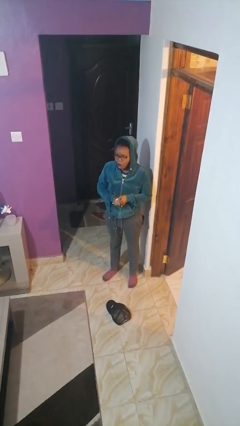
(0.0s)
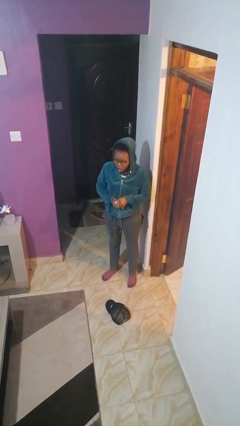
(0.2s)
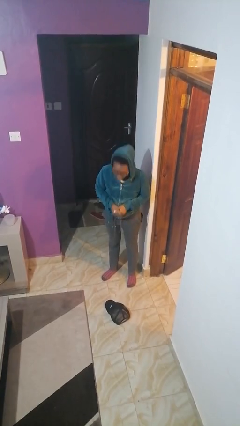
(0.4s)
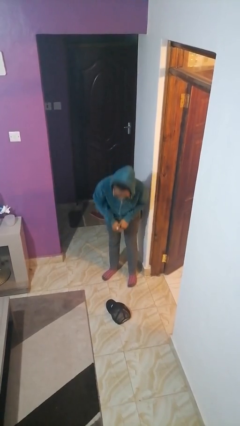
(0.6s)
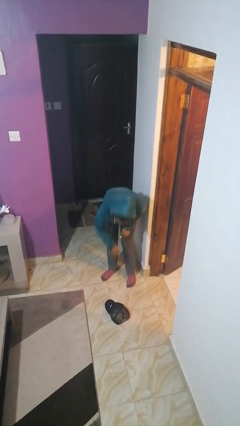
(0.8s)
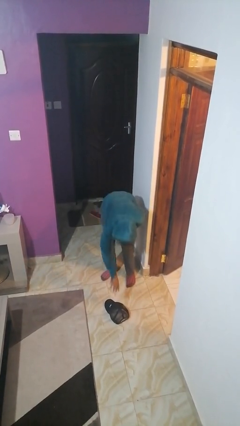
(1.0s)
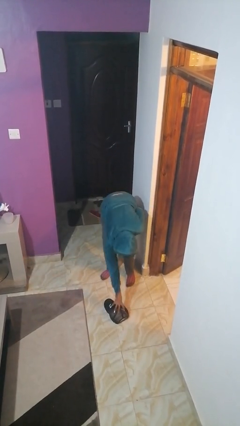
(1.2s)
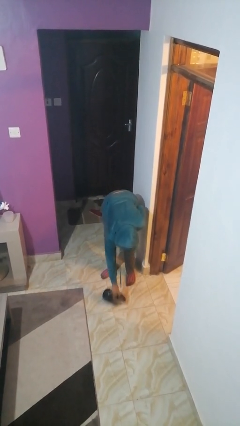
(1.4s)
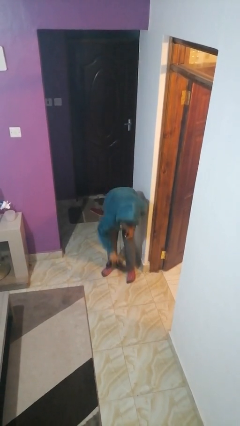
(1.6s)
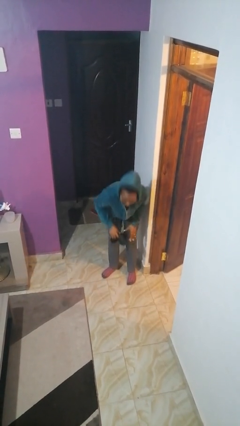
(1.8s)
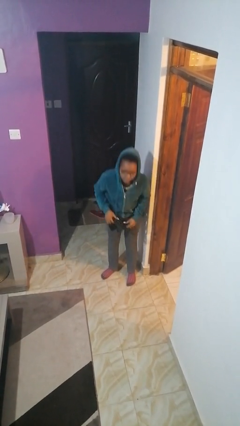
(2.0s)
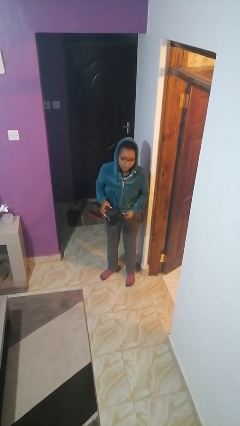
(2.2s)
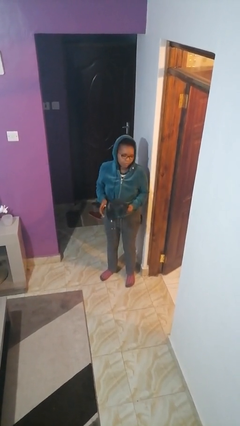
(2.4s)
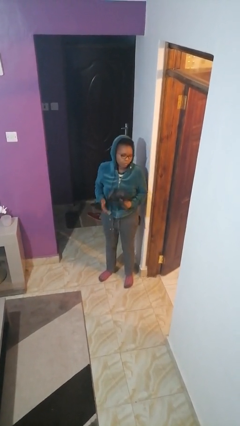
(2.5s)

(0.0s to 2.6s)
person picks up object from floor

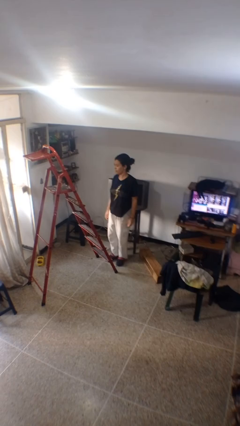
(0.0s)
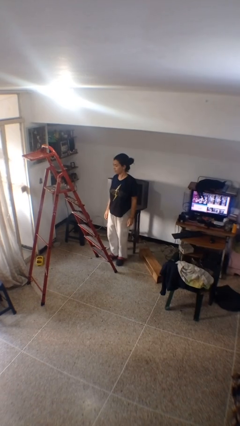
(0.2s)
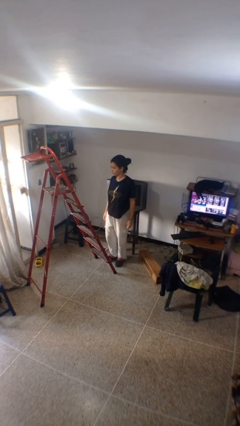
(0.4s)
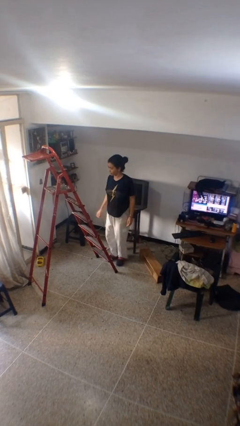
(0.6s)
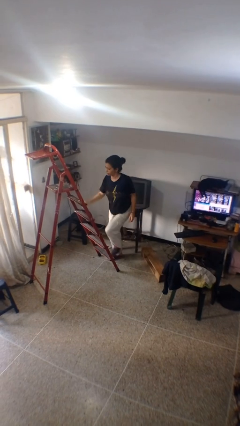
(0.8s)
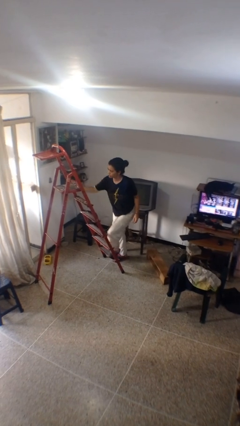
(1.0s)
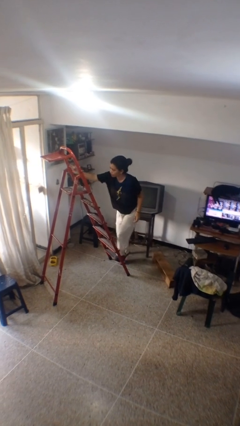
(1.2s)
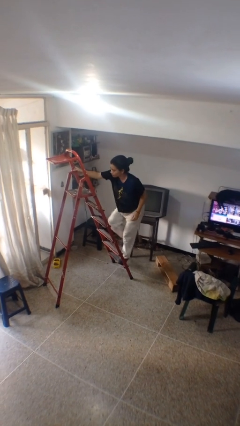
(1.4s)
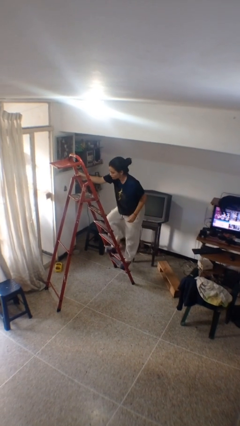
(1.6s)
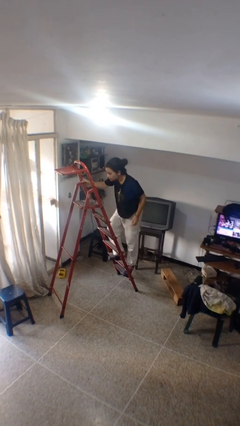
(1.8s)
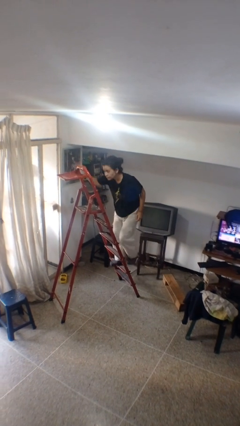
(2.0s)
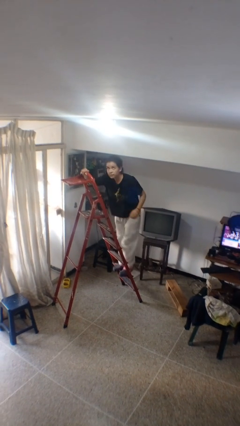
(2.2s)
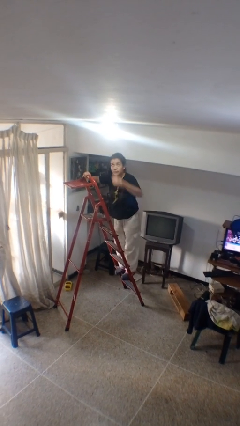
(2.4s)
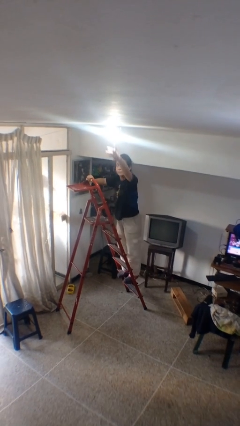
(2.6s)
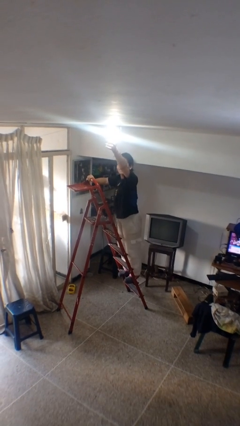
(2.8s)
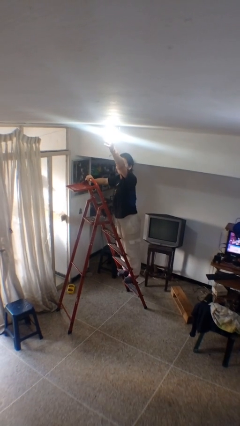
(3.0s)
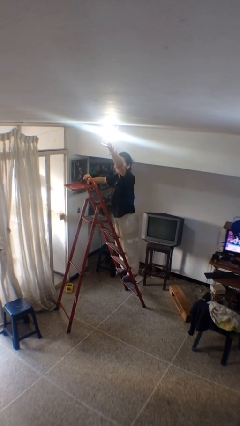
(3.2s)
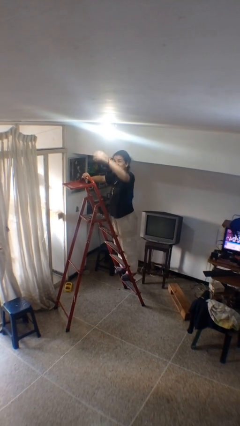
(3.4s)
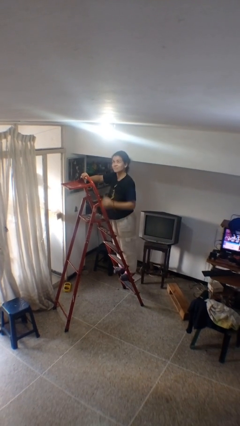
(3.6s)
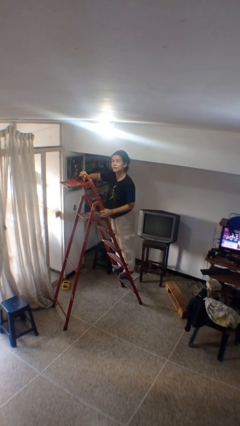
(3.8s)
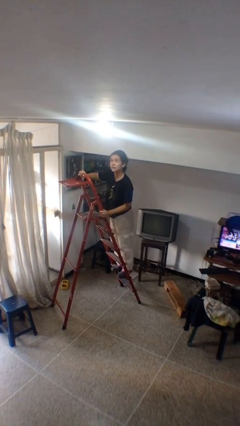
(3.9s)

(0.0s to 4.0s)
person climbs up ladder

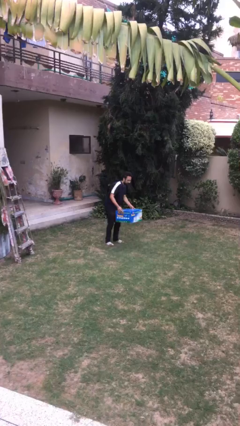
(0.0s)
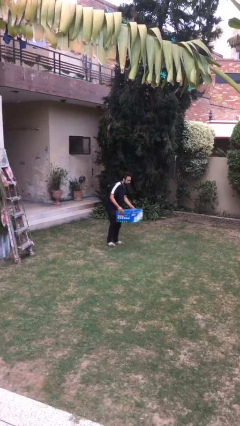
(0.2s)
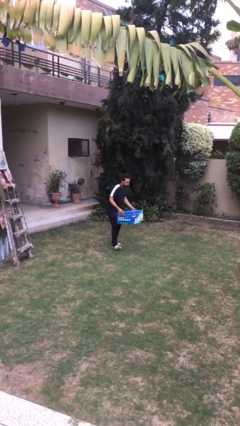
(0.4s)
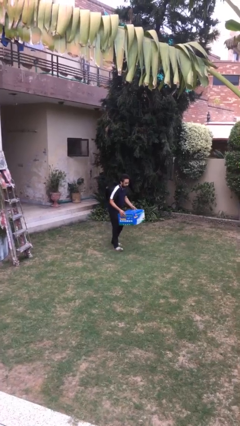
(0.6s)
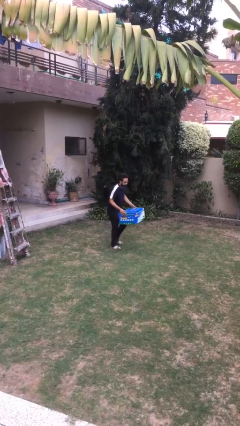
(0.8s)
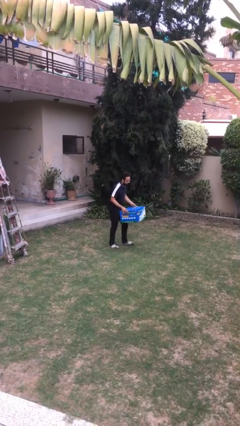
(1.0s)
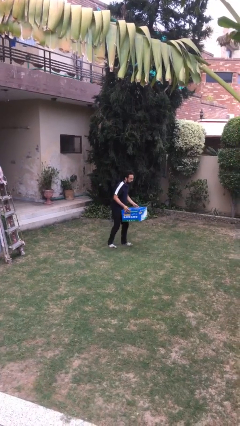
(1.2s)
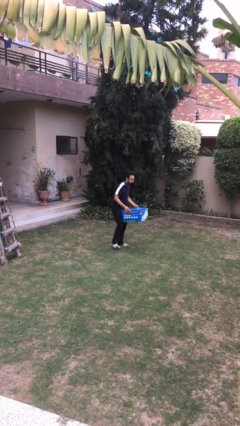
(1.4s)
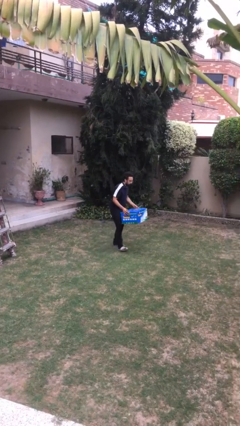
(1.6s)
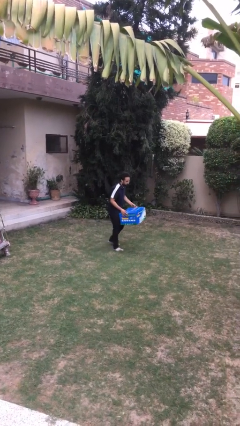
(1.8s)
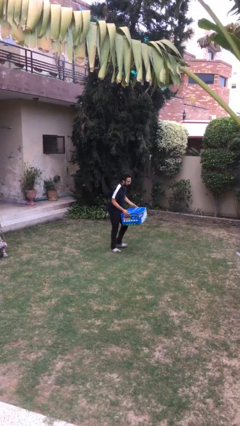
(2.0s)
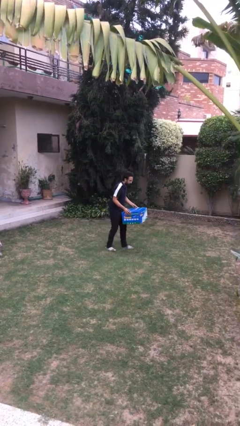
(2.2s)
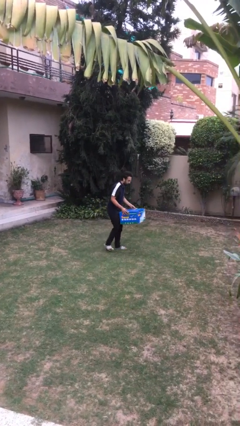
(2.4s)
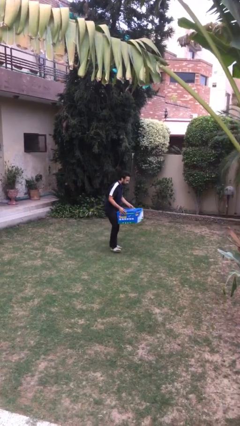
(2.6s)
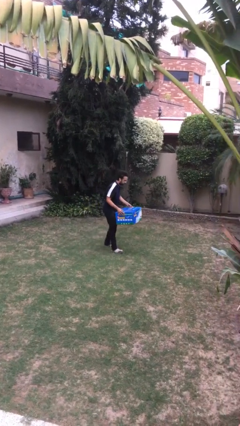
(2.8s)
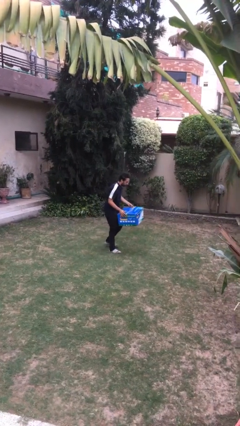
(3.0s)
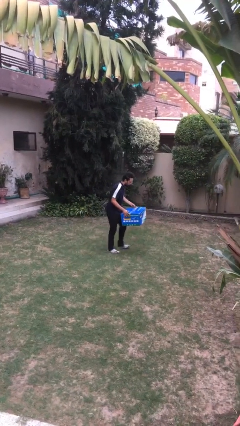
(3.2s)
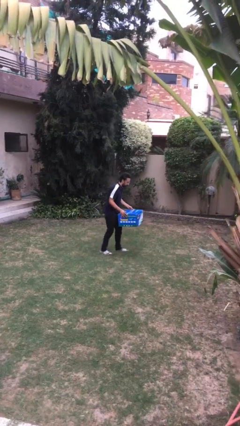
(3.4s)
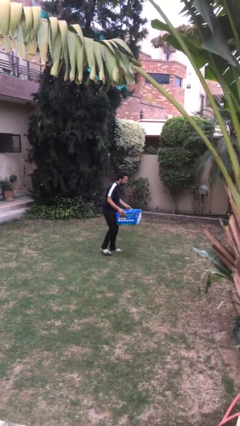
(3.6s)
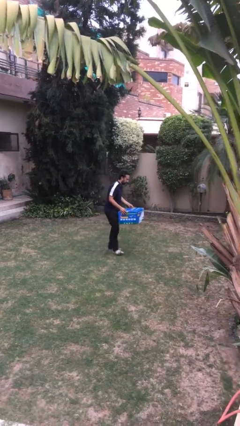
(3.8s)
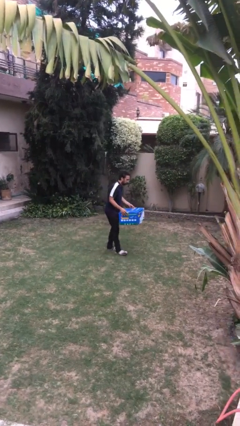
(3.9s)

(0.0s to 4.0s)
person carries heavy object

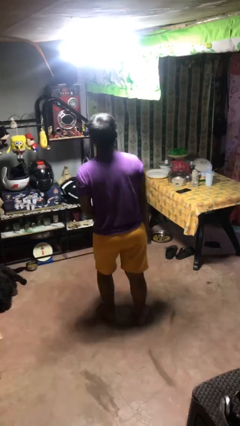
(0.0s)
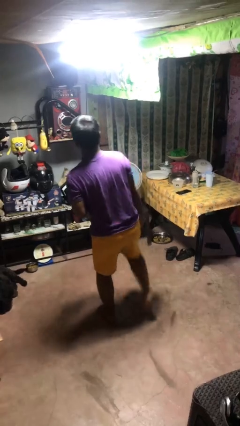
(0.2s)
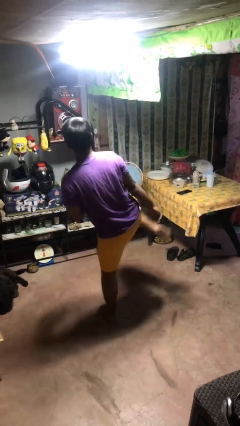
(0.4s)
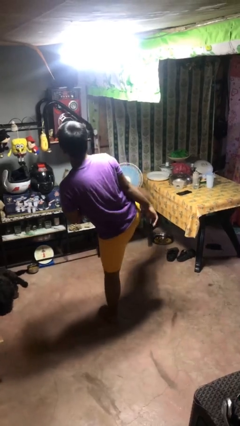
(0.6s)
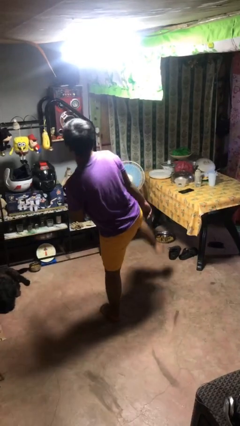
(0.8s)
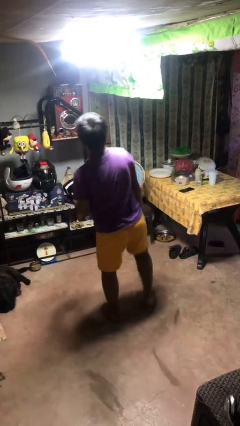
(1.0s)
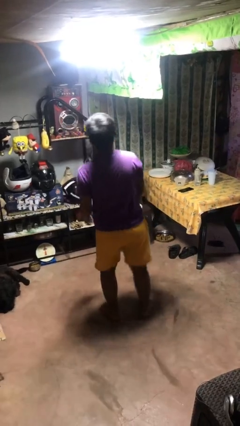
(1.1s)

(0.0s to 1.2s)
person karate kicks

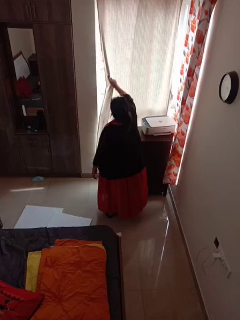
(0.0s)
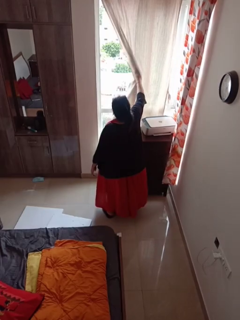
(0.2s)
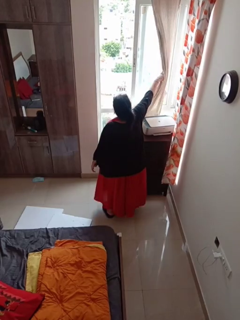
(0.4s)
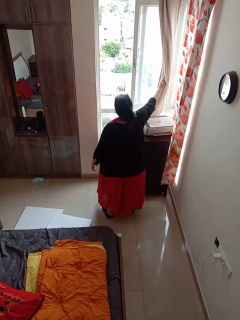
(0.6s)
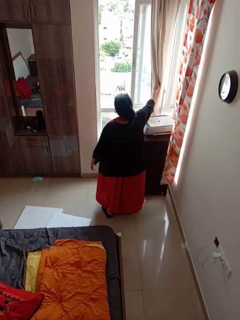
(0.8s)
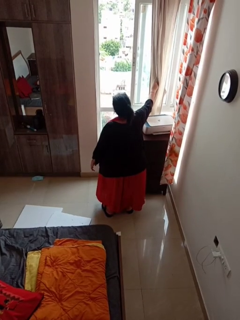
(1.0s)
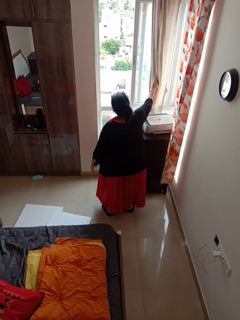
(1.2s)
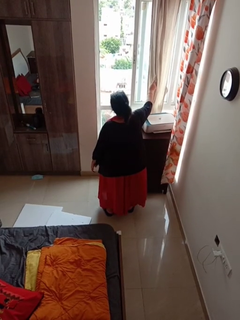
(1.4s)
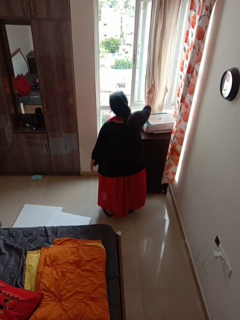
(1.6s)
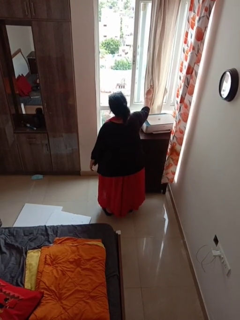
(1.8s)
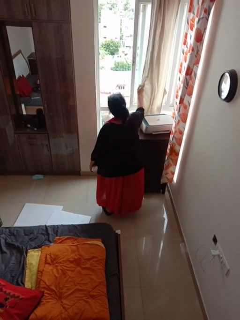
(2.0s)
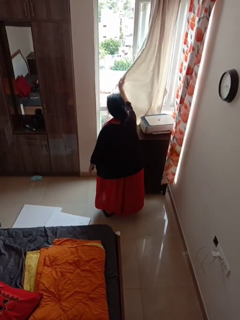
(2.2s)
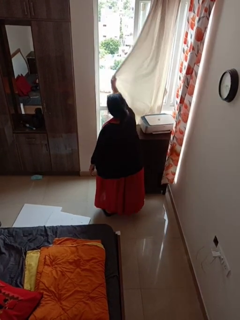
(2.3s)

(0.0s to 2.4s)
person opens curtains

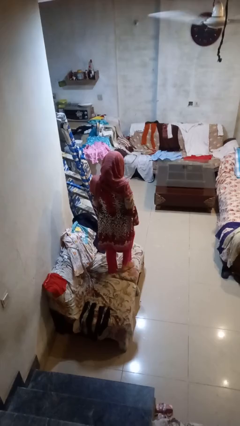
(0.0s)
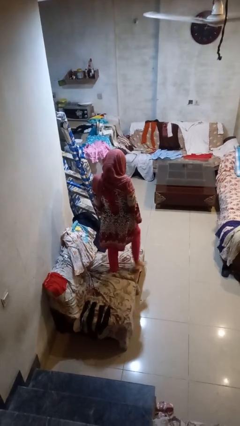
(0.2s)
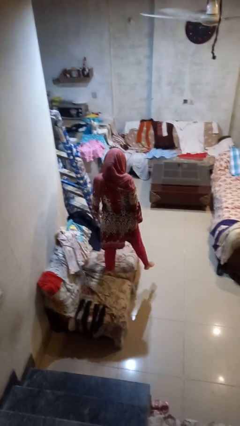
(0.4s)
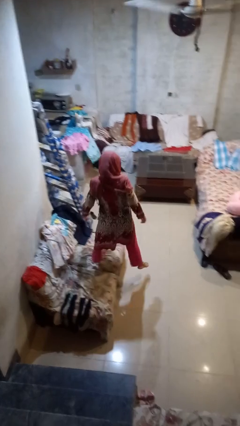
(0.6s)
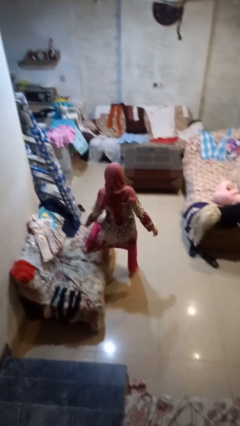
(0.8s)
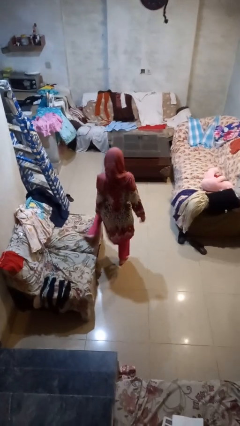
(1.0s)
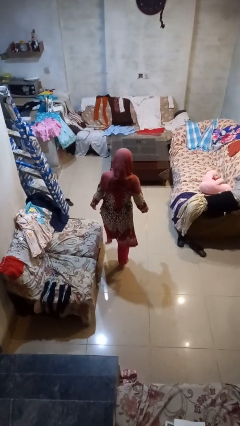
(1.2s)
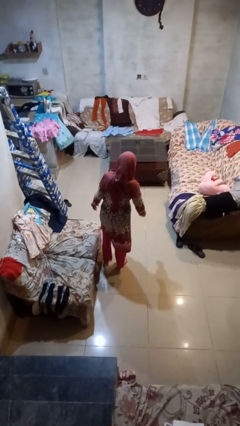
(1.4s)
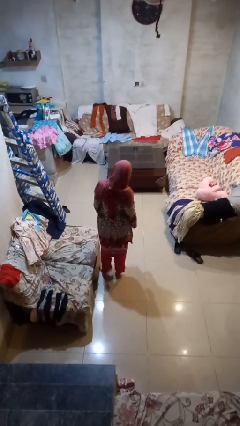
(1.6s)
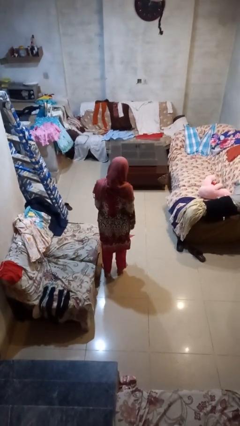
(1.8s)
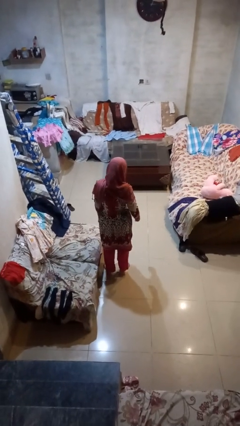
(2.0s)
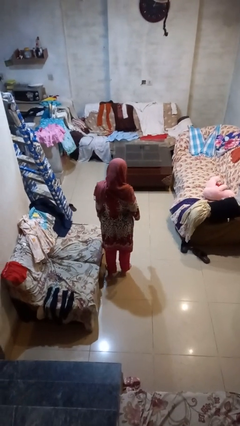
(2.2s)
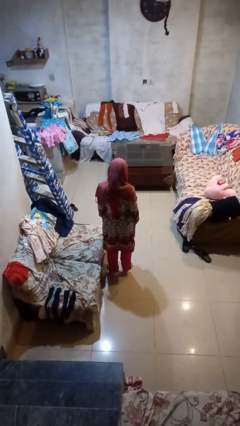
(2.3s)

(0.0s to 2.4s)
person climbs off couch

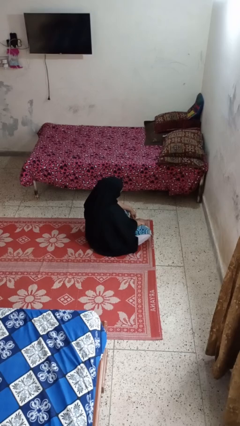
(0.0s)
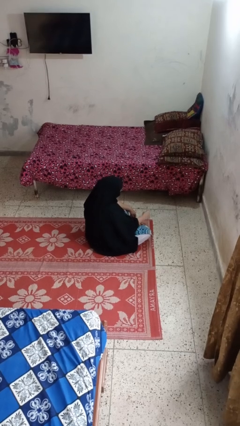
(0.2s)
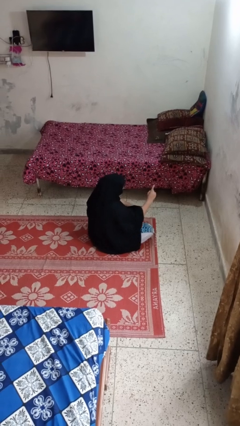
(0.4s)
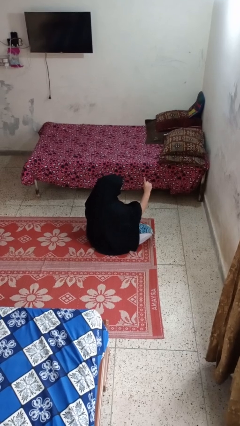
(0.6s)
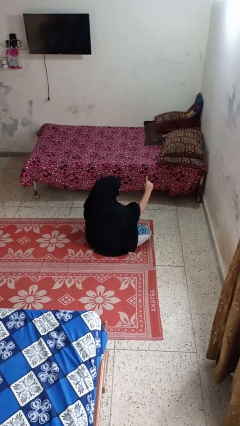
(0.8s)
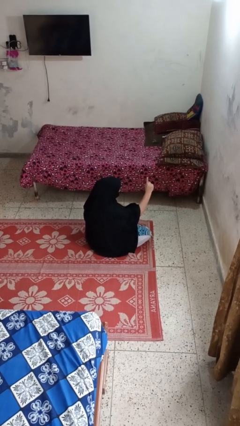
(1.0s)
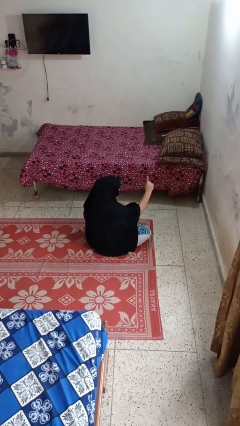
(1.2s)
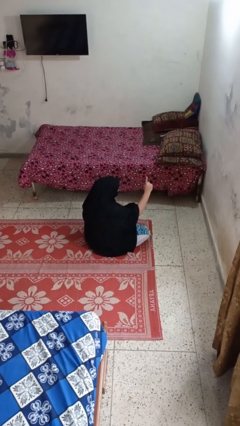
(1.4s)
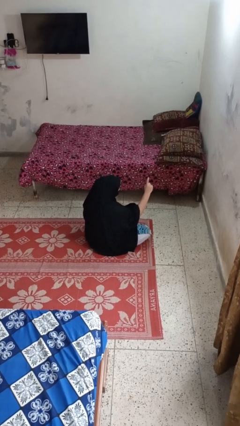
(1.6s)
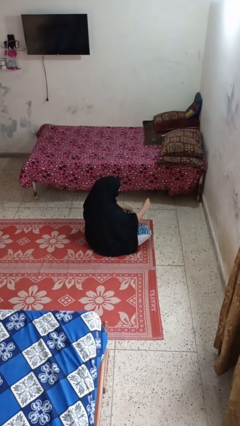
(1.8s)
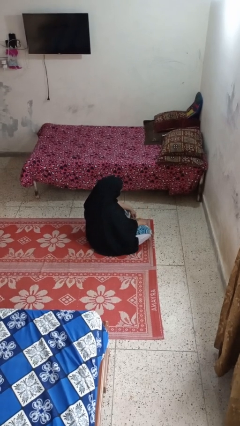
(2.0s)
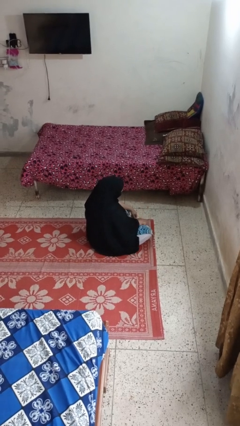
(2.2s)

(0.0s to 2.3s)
person gestures number one
